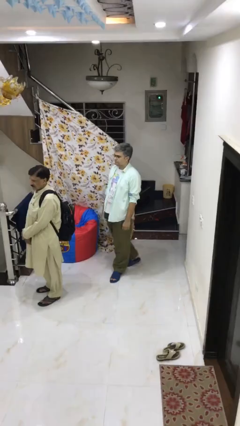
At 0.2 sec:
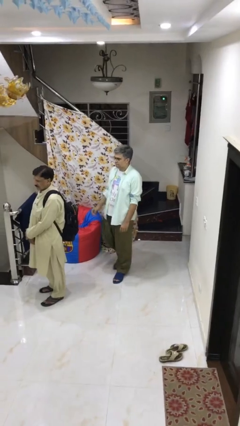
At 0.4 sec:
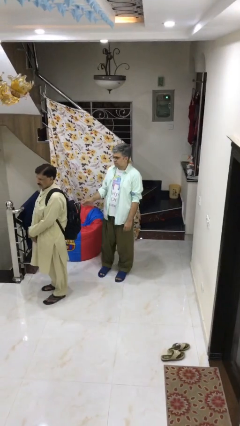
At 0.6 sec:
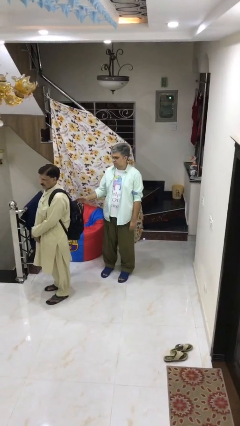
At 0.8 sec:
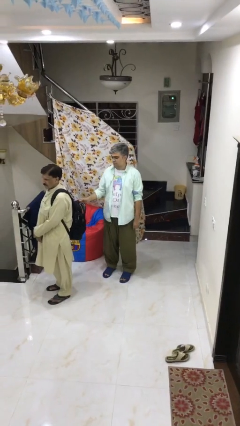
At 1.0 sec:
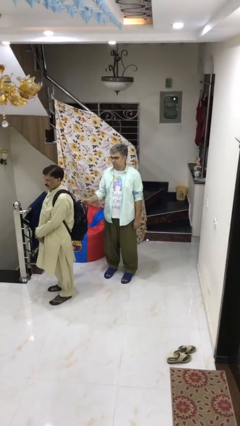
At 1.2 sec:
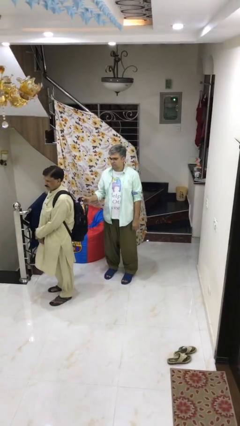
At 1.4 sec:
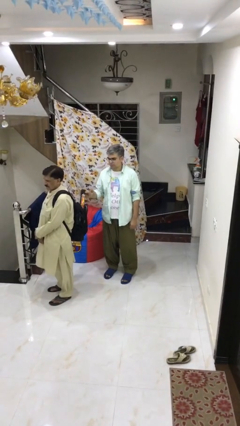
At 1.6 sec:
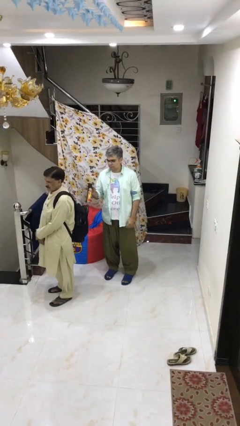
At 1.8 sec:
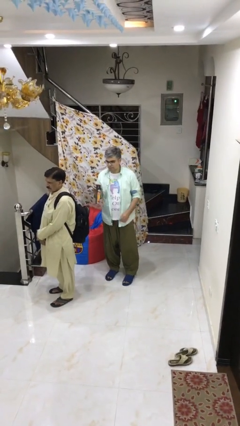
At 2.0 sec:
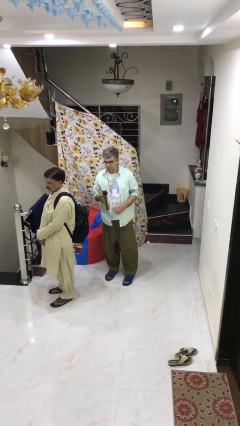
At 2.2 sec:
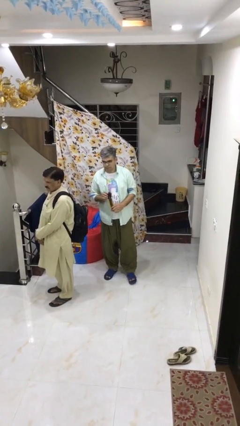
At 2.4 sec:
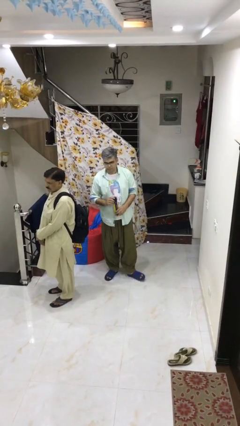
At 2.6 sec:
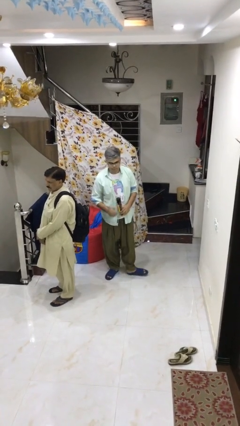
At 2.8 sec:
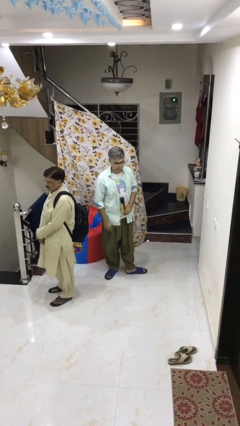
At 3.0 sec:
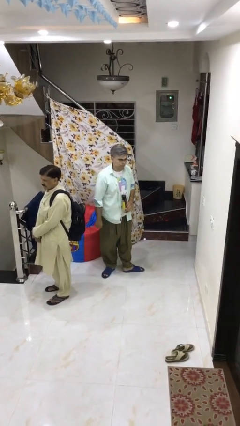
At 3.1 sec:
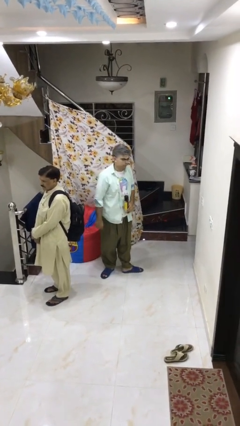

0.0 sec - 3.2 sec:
person steals object from person

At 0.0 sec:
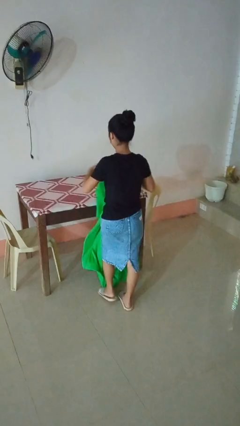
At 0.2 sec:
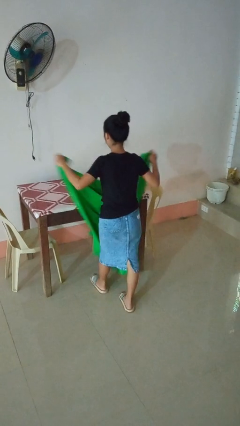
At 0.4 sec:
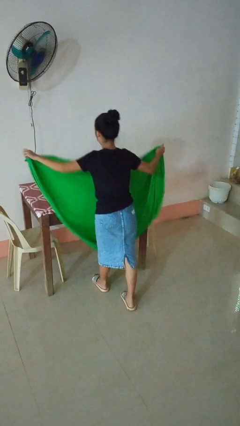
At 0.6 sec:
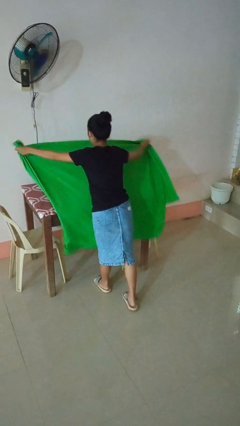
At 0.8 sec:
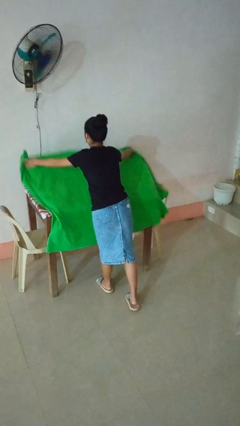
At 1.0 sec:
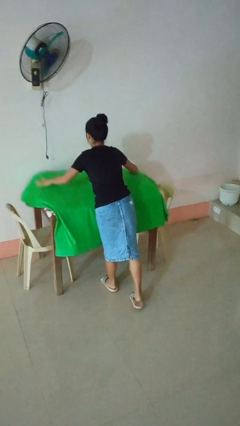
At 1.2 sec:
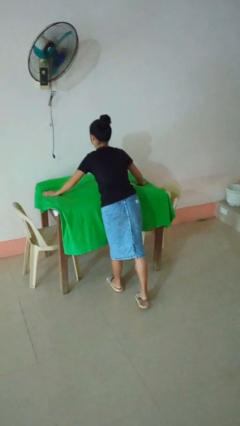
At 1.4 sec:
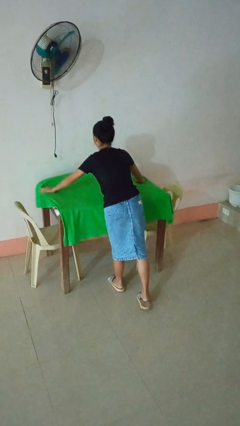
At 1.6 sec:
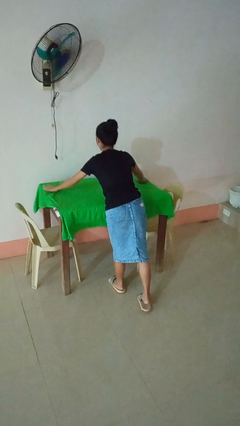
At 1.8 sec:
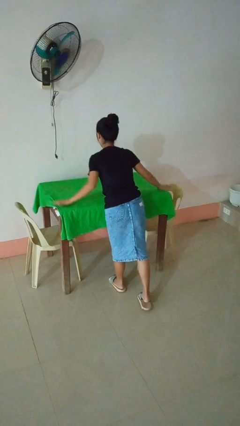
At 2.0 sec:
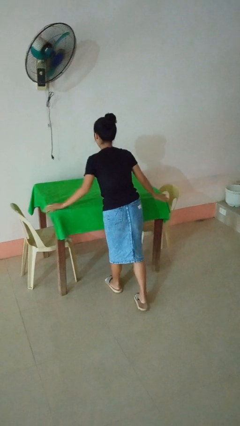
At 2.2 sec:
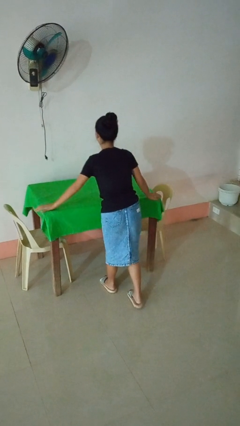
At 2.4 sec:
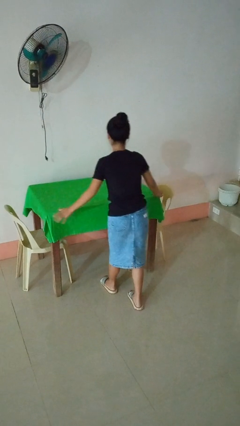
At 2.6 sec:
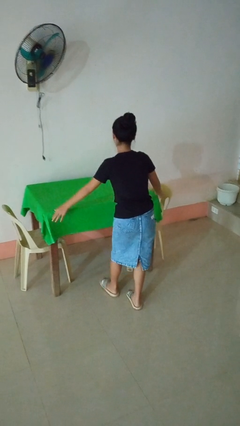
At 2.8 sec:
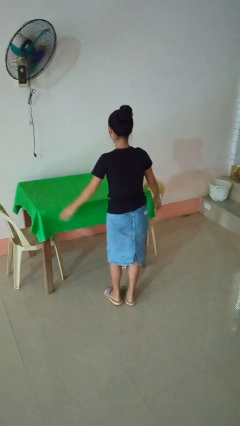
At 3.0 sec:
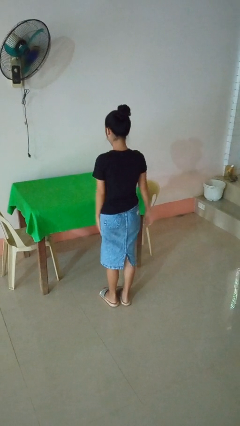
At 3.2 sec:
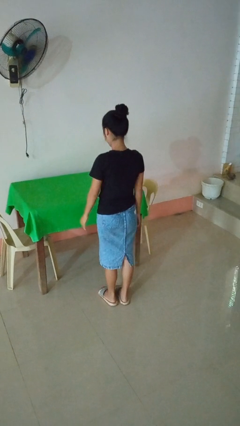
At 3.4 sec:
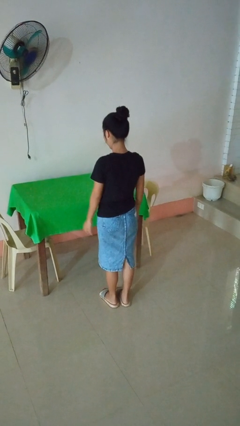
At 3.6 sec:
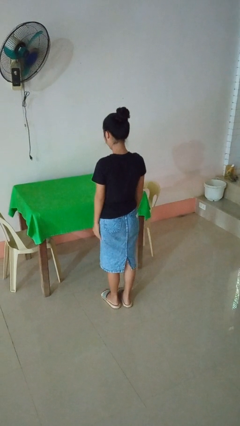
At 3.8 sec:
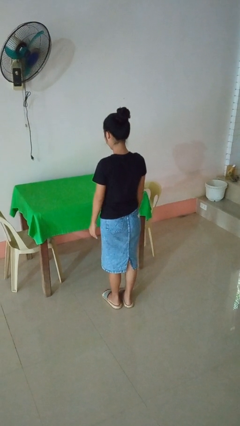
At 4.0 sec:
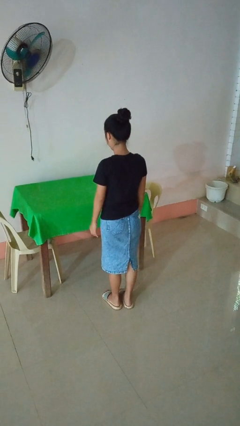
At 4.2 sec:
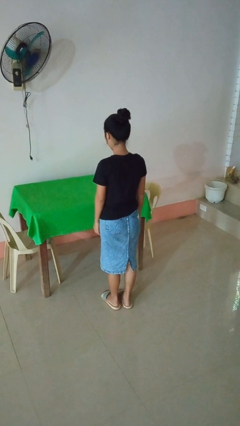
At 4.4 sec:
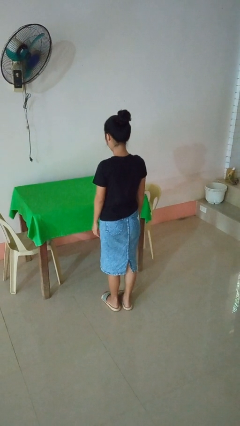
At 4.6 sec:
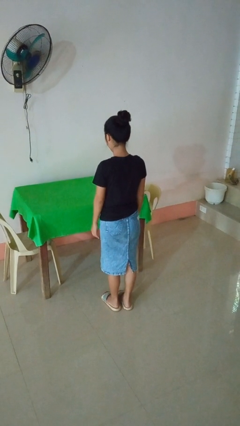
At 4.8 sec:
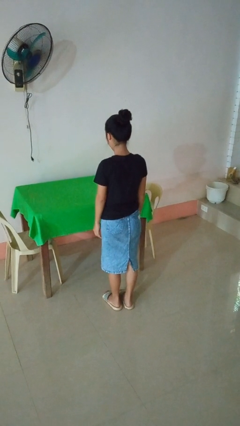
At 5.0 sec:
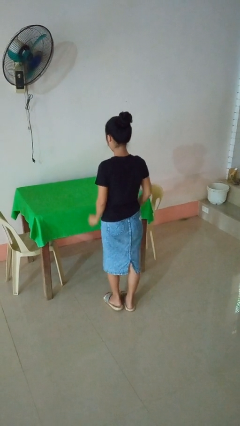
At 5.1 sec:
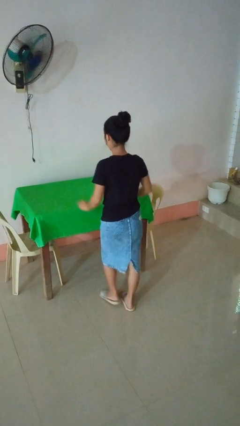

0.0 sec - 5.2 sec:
person spreads tablecloth

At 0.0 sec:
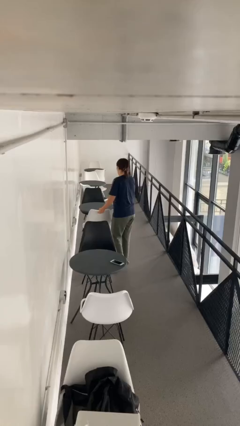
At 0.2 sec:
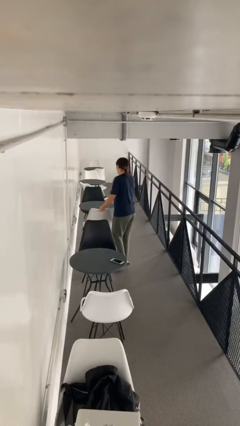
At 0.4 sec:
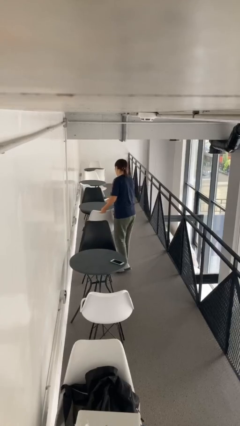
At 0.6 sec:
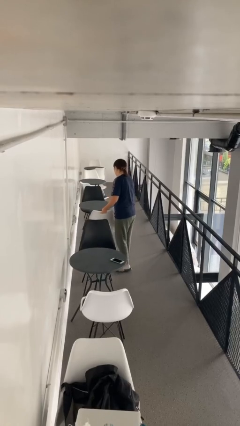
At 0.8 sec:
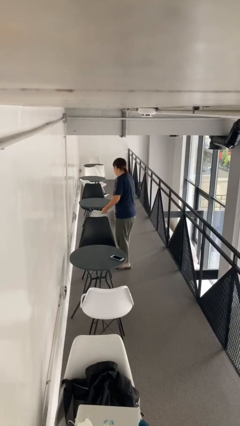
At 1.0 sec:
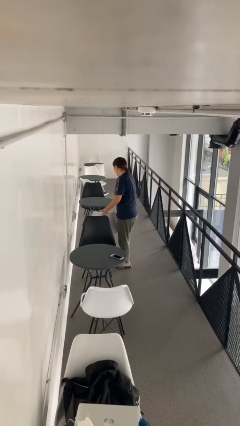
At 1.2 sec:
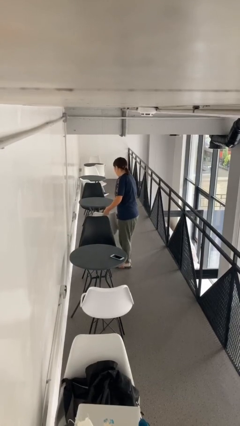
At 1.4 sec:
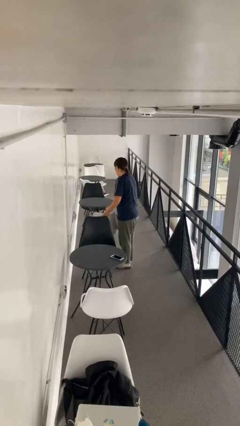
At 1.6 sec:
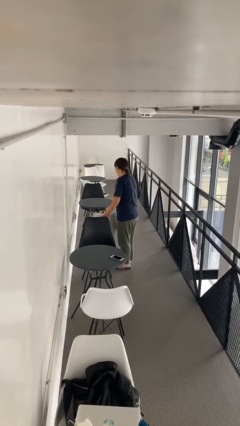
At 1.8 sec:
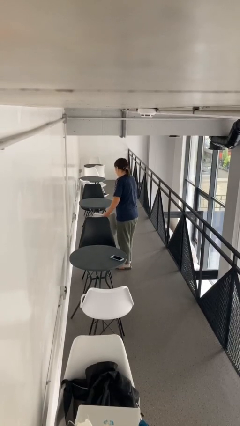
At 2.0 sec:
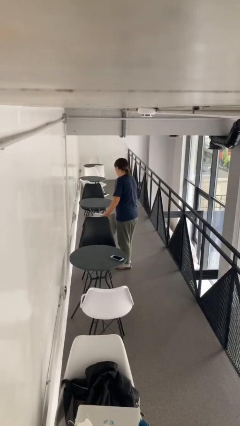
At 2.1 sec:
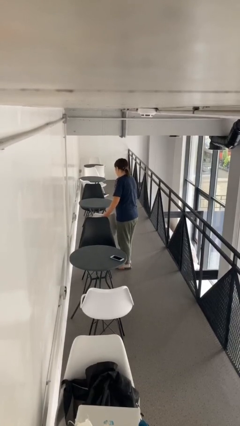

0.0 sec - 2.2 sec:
person pulls out chair

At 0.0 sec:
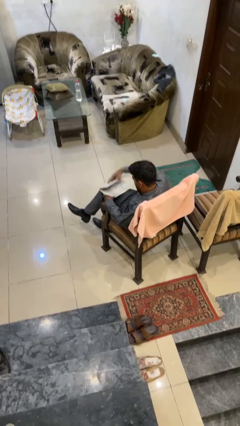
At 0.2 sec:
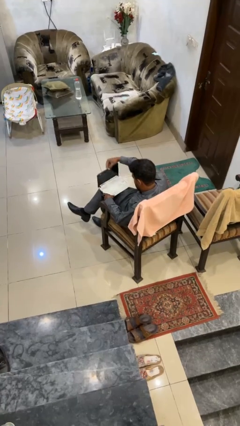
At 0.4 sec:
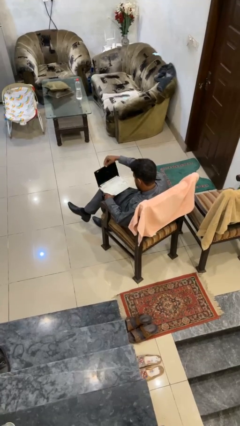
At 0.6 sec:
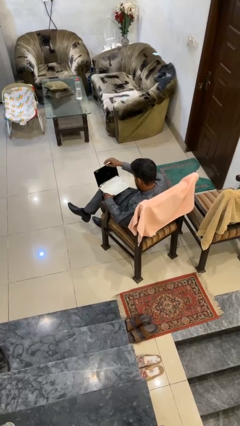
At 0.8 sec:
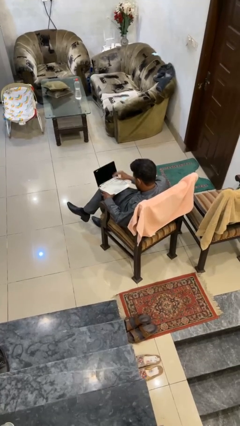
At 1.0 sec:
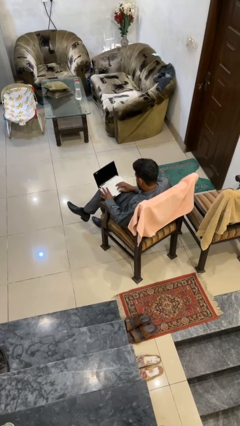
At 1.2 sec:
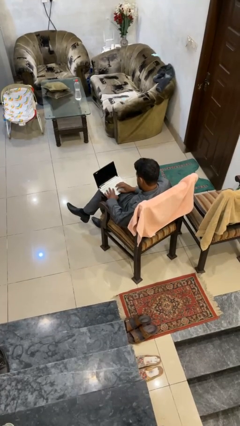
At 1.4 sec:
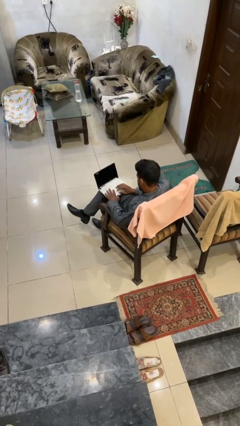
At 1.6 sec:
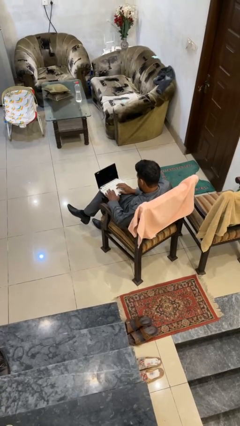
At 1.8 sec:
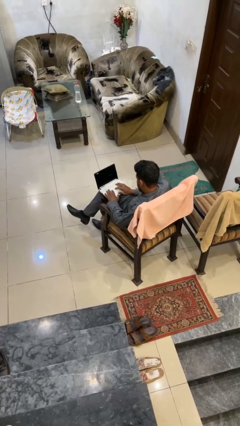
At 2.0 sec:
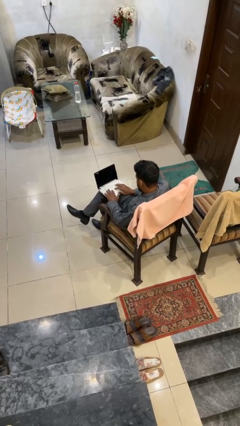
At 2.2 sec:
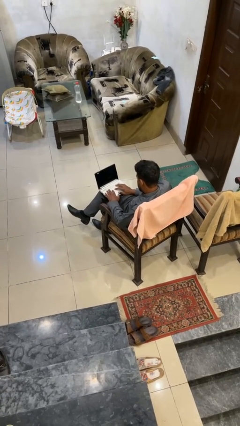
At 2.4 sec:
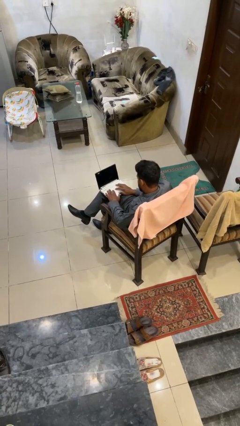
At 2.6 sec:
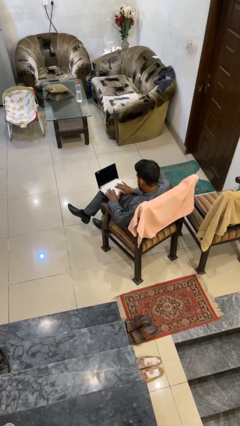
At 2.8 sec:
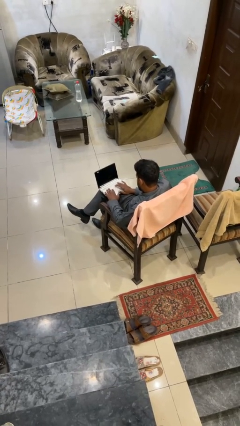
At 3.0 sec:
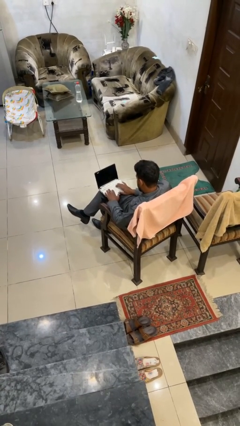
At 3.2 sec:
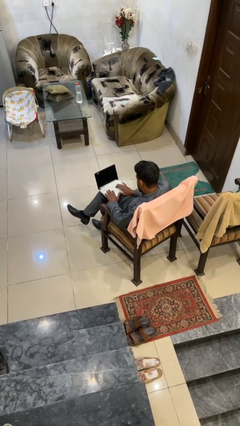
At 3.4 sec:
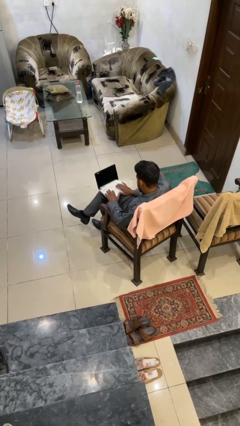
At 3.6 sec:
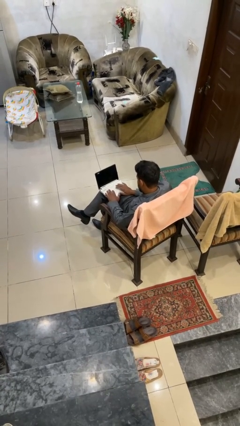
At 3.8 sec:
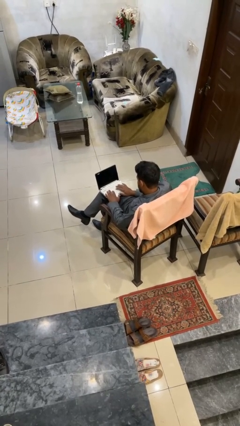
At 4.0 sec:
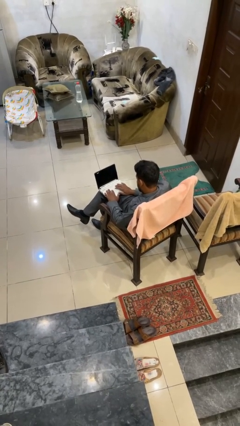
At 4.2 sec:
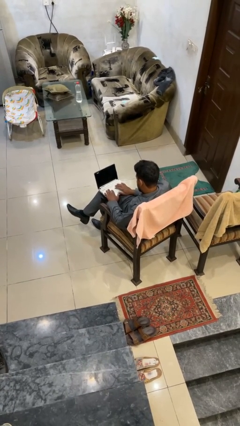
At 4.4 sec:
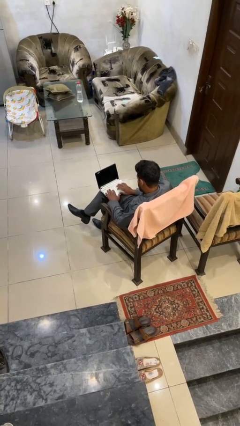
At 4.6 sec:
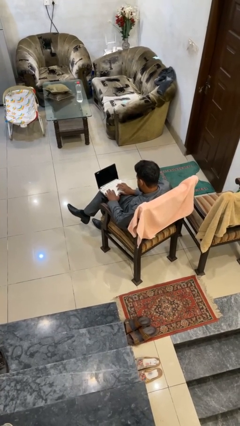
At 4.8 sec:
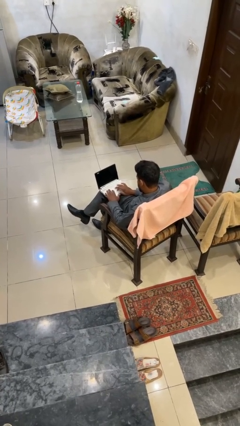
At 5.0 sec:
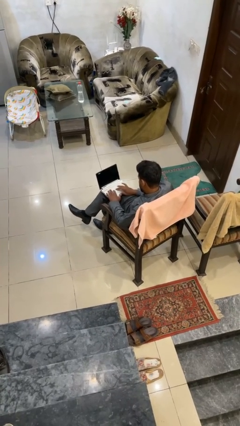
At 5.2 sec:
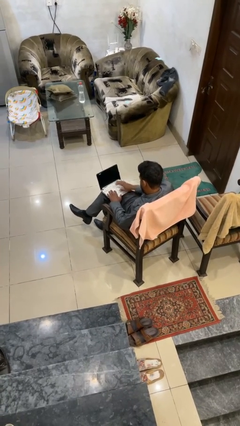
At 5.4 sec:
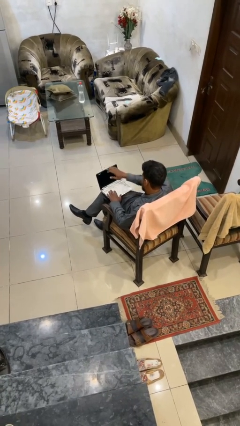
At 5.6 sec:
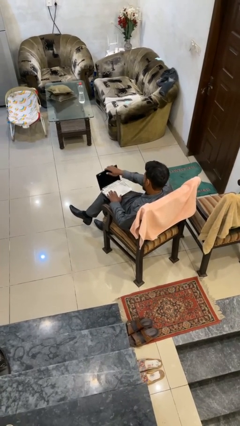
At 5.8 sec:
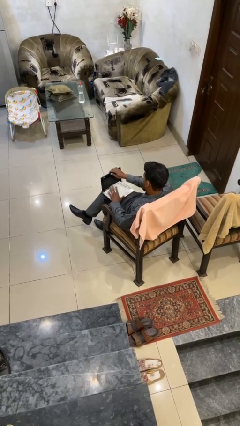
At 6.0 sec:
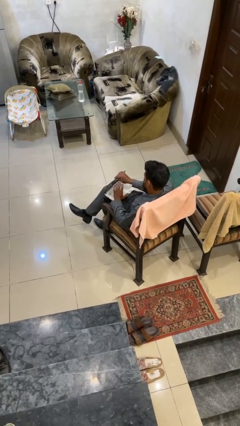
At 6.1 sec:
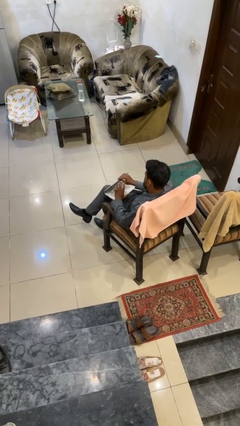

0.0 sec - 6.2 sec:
person interacts with laptop
